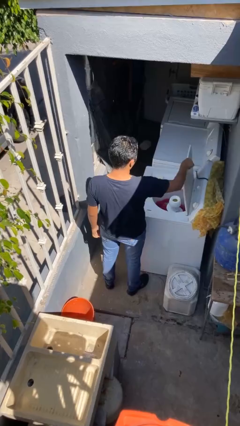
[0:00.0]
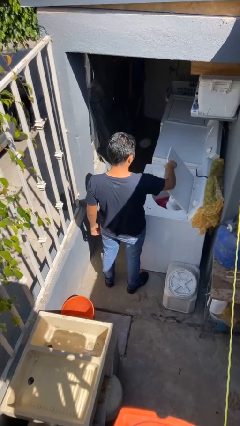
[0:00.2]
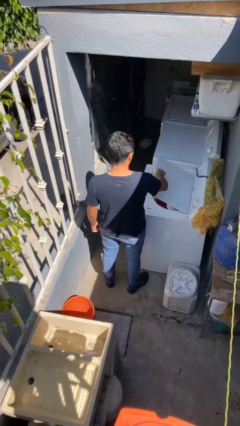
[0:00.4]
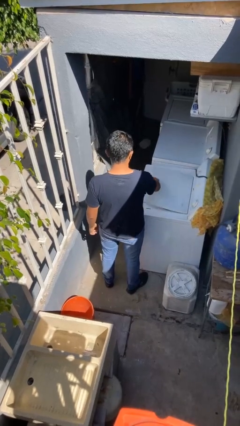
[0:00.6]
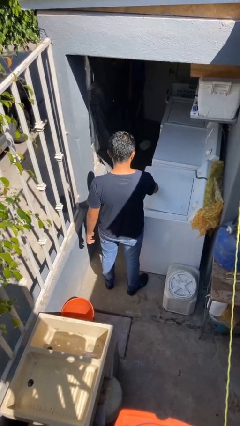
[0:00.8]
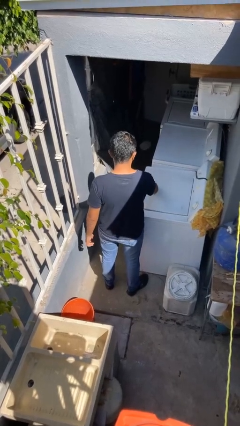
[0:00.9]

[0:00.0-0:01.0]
person closes clothes washer

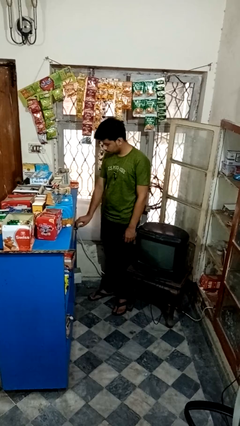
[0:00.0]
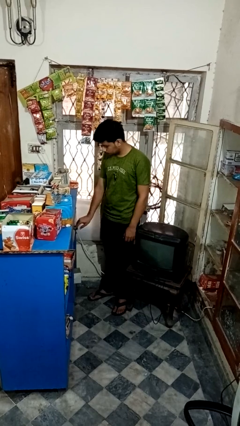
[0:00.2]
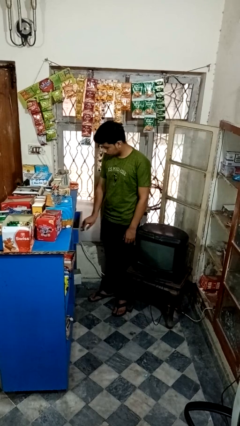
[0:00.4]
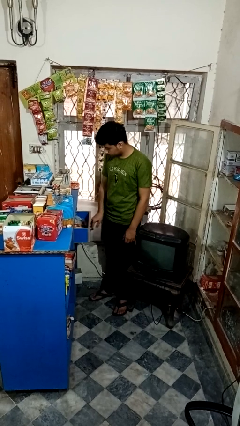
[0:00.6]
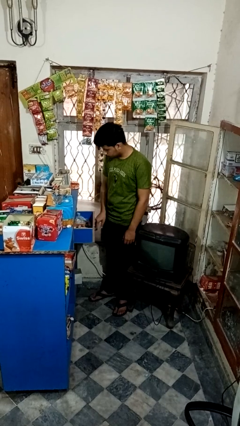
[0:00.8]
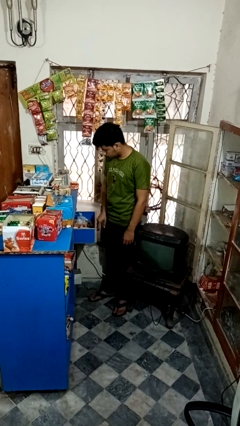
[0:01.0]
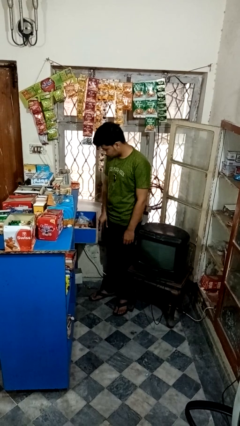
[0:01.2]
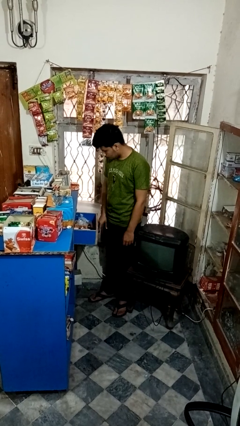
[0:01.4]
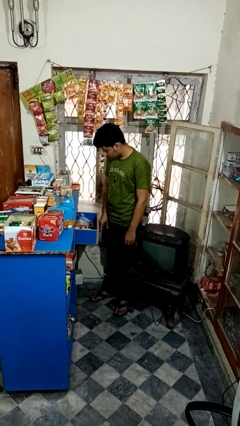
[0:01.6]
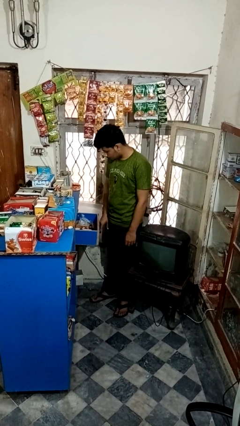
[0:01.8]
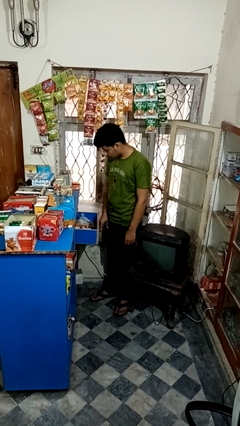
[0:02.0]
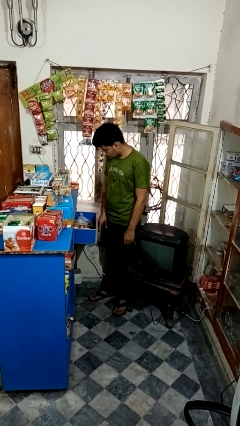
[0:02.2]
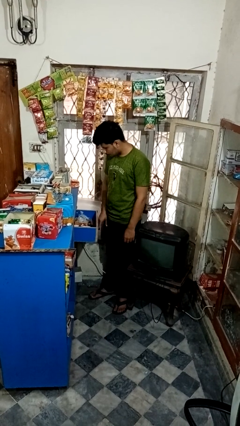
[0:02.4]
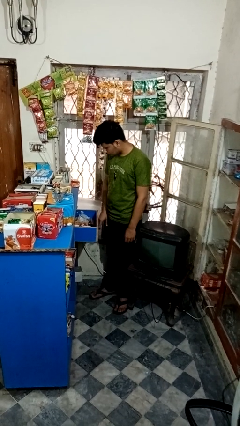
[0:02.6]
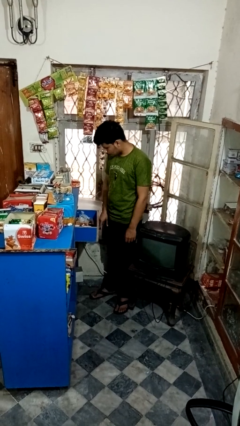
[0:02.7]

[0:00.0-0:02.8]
person opens kitchen drawer

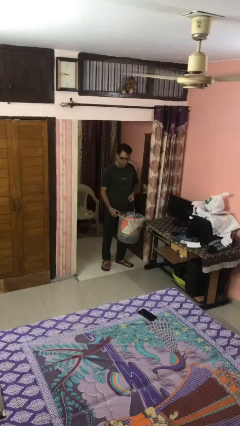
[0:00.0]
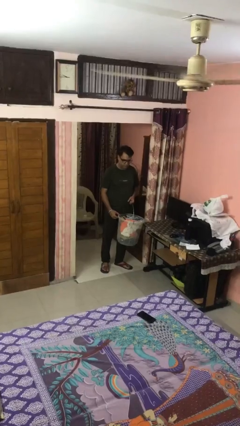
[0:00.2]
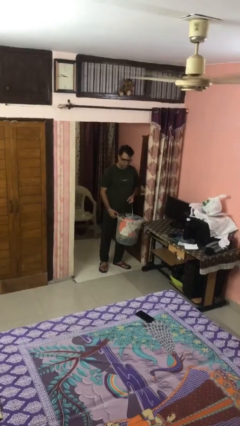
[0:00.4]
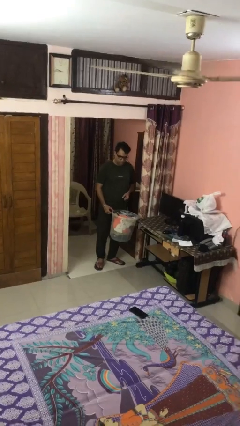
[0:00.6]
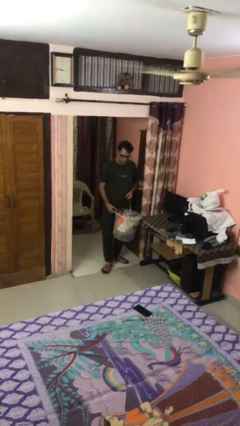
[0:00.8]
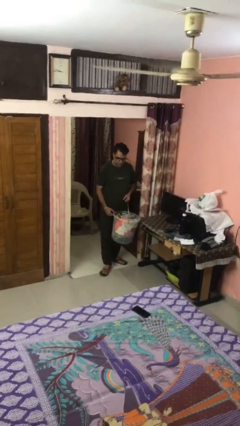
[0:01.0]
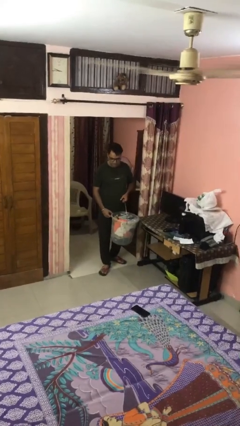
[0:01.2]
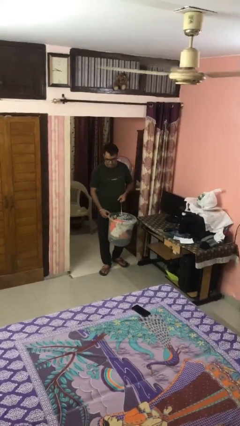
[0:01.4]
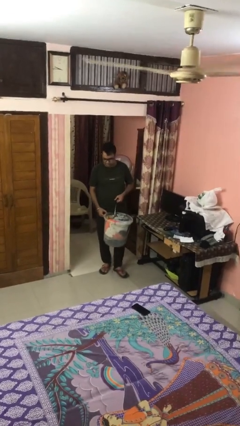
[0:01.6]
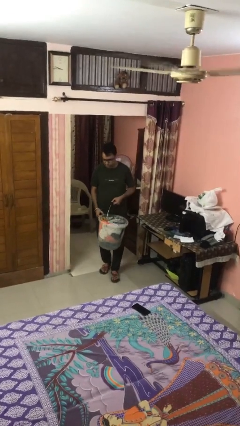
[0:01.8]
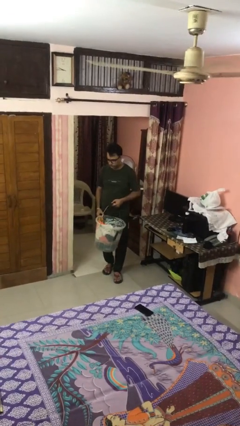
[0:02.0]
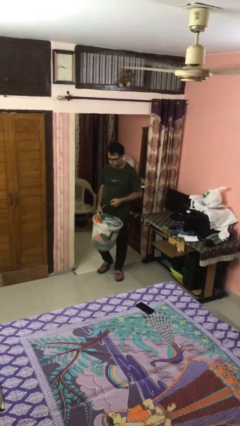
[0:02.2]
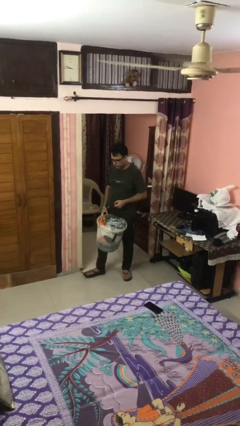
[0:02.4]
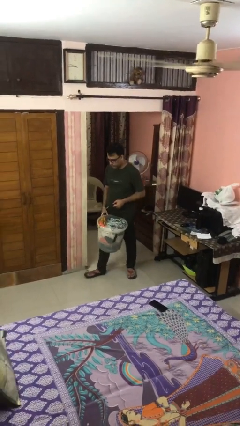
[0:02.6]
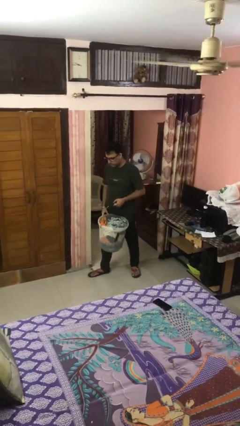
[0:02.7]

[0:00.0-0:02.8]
person carries laundry basket

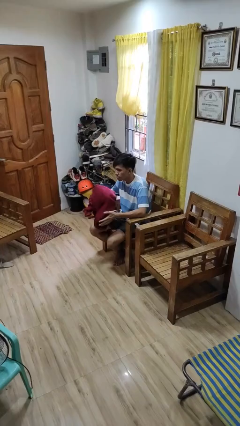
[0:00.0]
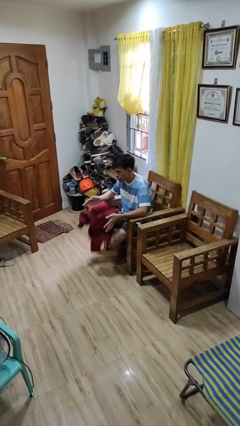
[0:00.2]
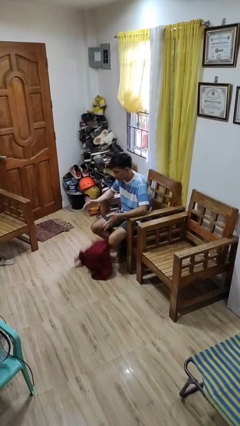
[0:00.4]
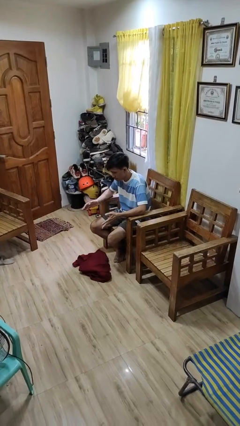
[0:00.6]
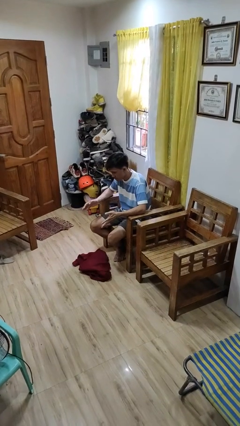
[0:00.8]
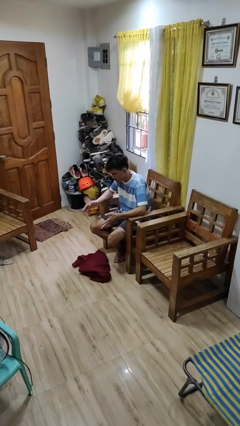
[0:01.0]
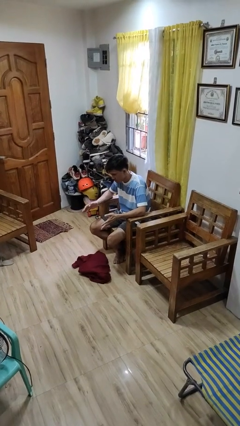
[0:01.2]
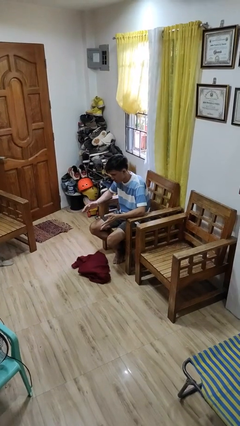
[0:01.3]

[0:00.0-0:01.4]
person drops object

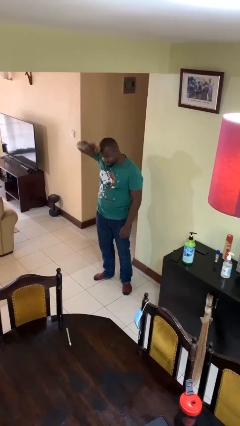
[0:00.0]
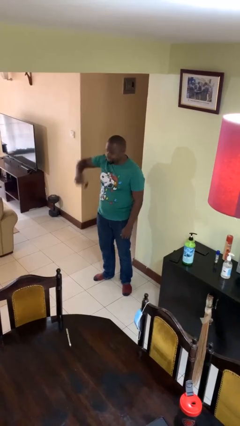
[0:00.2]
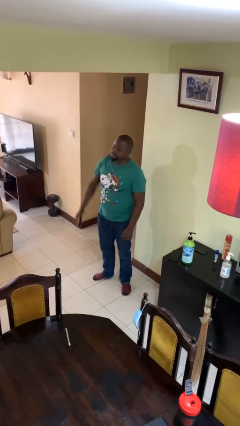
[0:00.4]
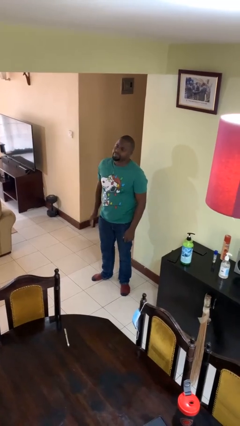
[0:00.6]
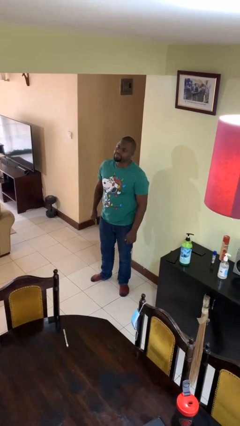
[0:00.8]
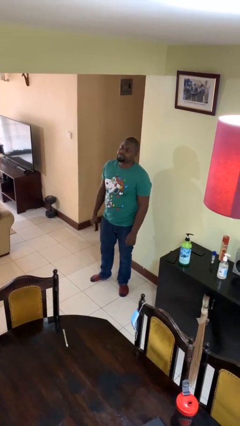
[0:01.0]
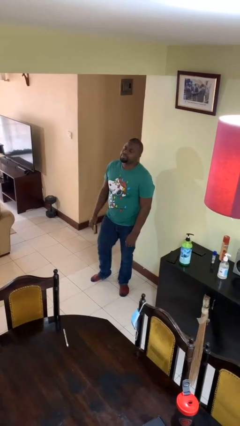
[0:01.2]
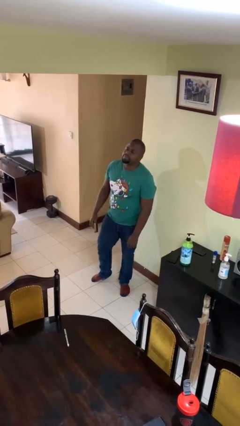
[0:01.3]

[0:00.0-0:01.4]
person brushes hair

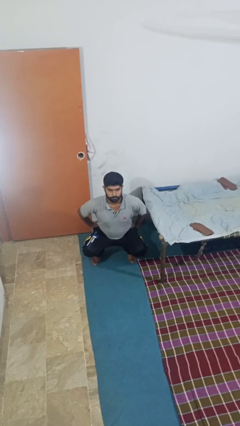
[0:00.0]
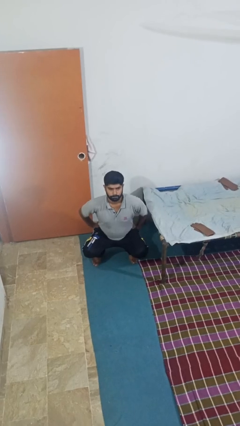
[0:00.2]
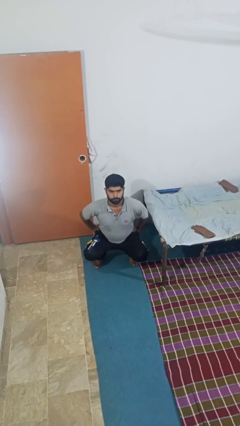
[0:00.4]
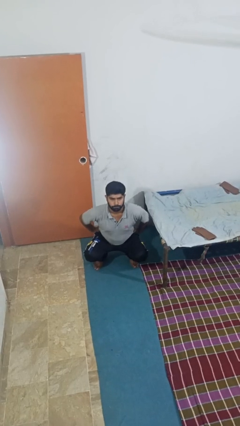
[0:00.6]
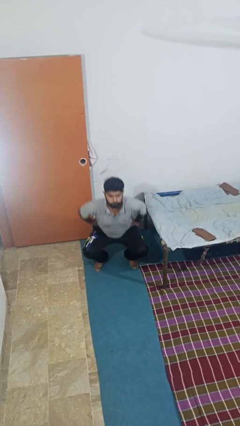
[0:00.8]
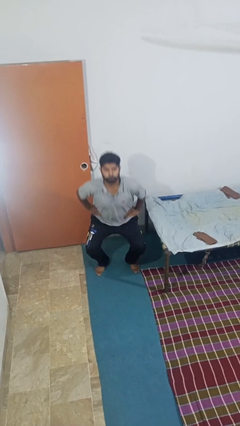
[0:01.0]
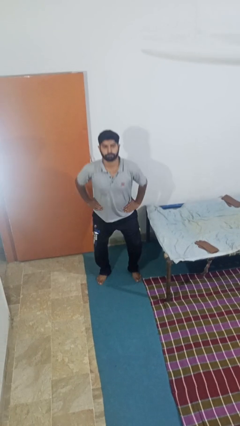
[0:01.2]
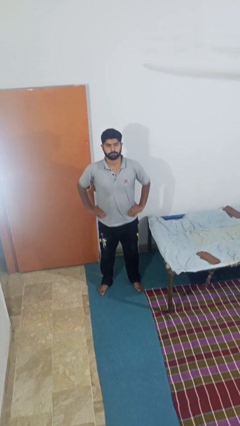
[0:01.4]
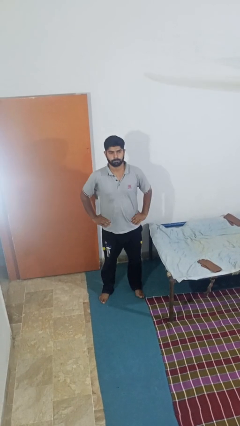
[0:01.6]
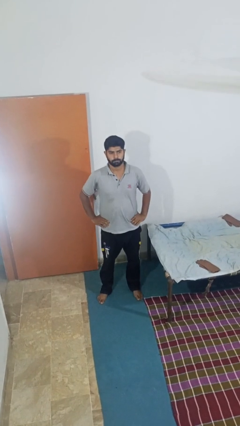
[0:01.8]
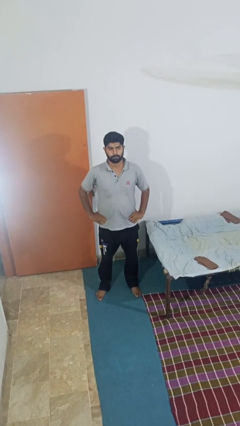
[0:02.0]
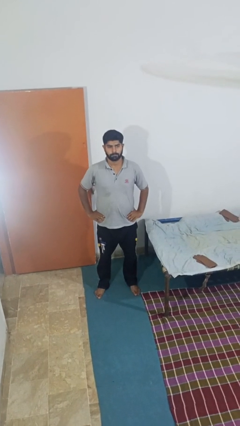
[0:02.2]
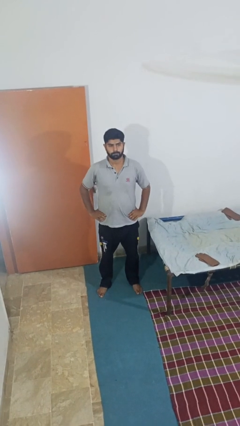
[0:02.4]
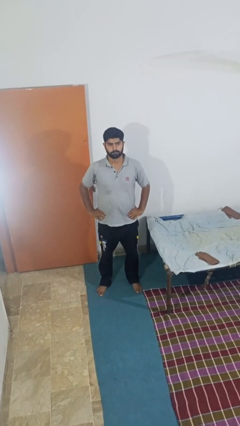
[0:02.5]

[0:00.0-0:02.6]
person stands up

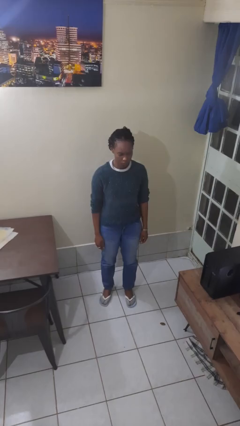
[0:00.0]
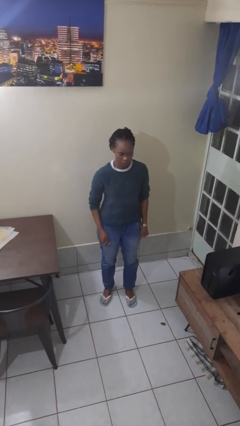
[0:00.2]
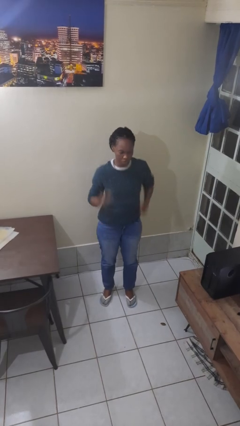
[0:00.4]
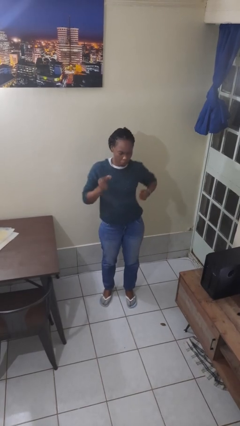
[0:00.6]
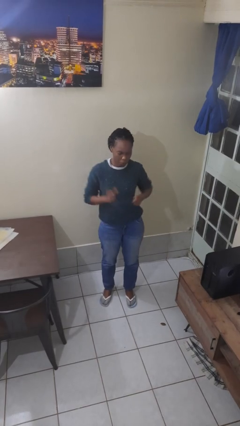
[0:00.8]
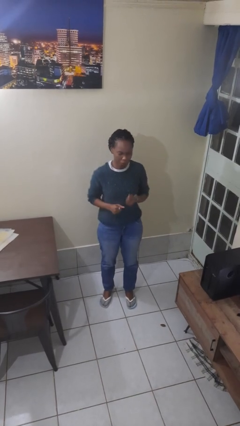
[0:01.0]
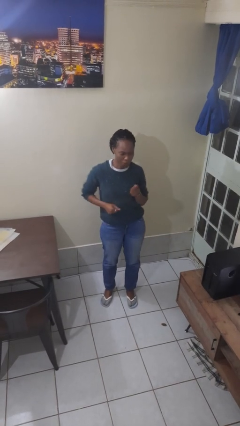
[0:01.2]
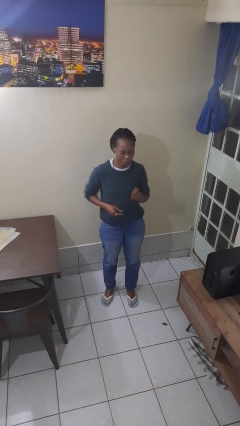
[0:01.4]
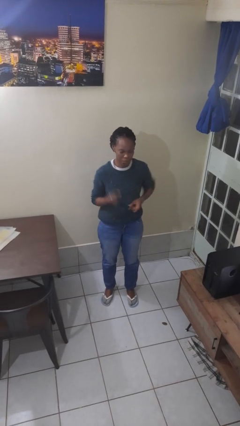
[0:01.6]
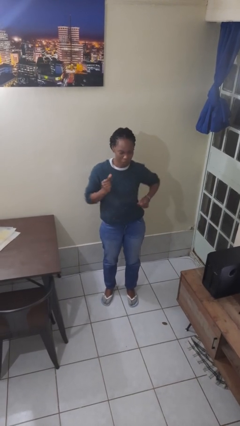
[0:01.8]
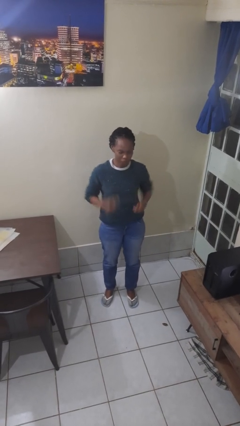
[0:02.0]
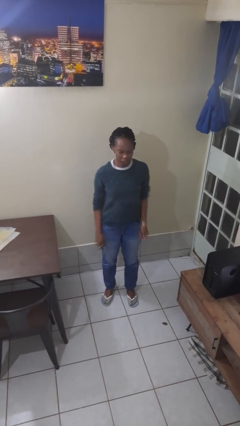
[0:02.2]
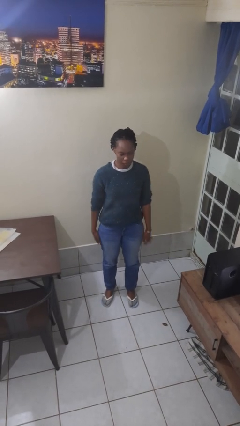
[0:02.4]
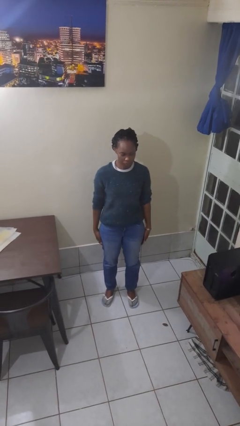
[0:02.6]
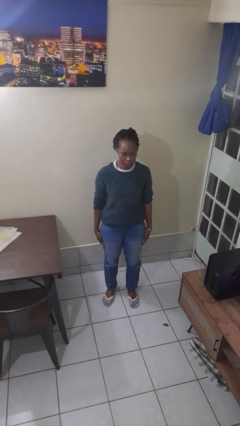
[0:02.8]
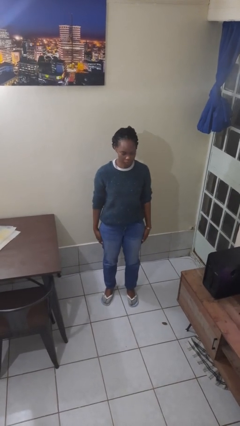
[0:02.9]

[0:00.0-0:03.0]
person dances in place

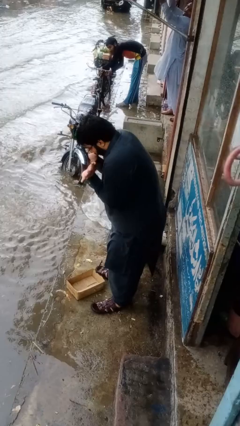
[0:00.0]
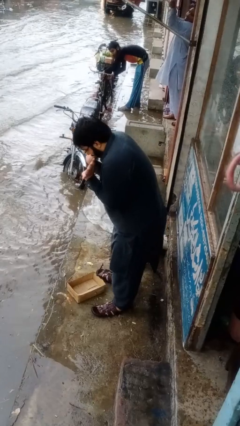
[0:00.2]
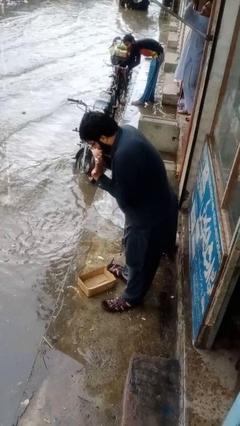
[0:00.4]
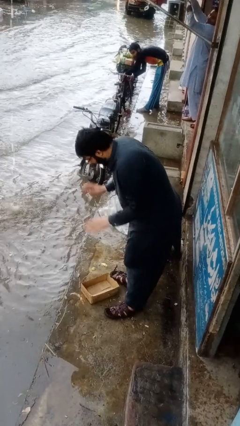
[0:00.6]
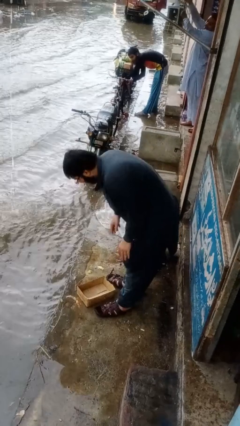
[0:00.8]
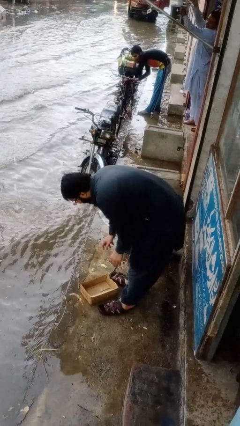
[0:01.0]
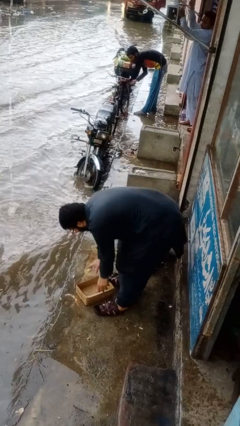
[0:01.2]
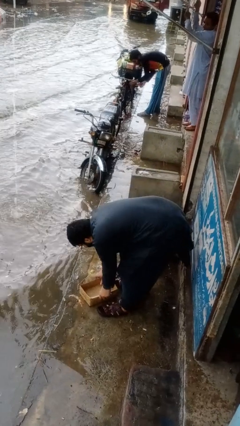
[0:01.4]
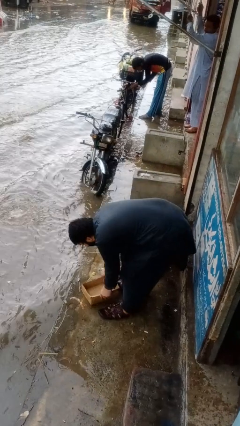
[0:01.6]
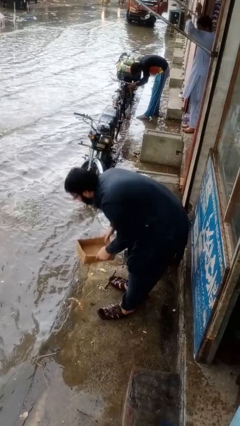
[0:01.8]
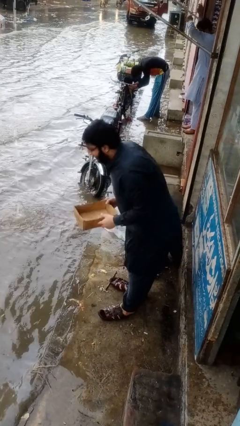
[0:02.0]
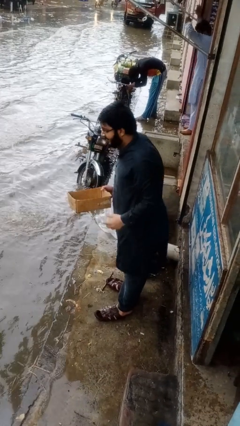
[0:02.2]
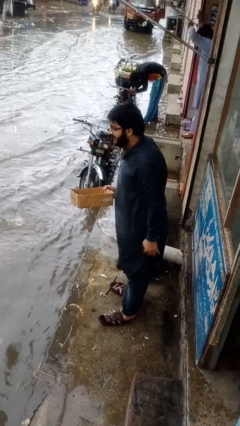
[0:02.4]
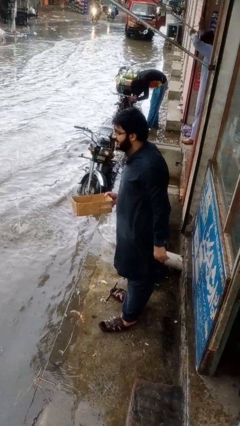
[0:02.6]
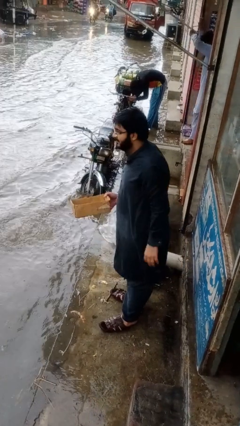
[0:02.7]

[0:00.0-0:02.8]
person picks up object from floor
